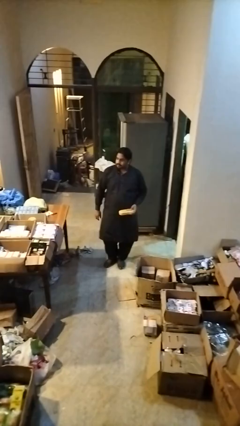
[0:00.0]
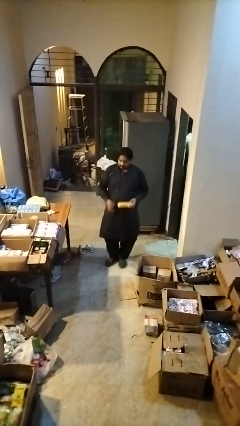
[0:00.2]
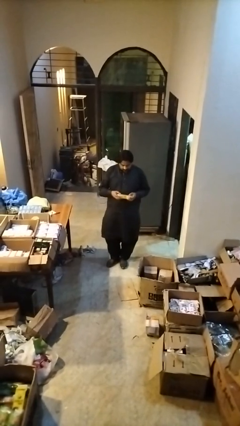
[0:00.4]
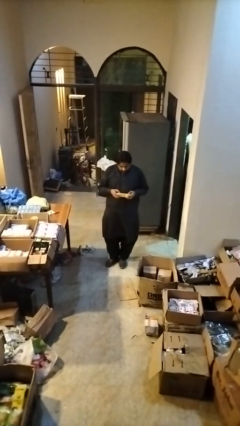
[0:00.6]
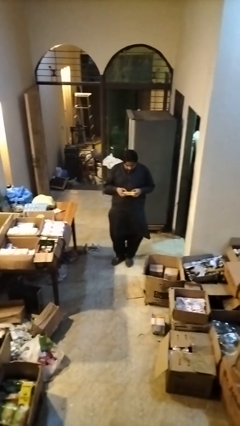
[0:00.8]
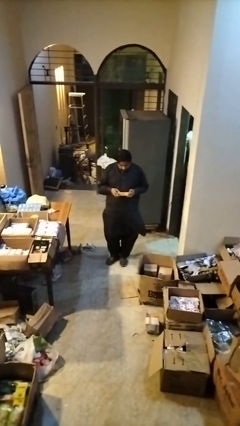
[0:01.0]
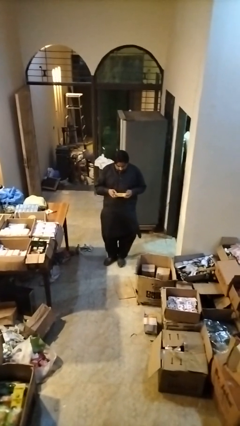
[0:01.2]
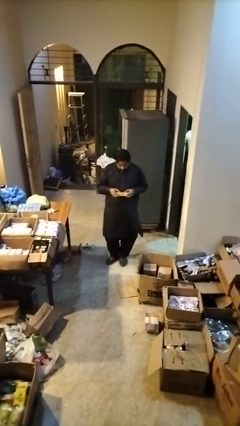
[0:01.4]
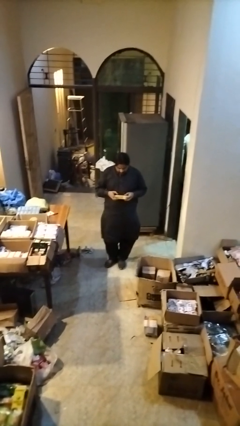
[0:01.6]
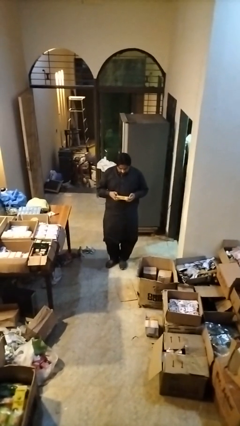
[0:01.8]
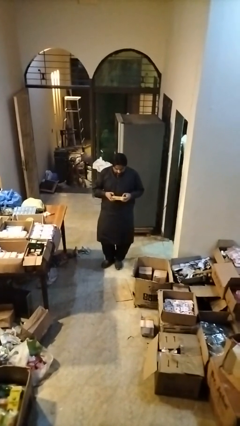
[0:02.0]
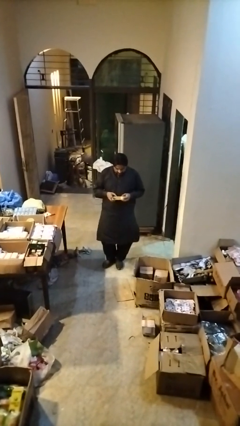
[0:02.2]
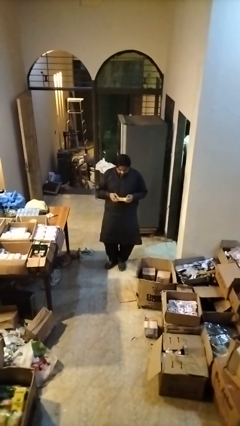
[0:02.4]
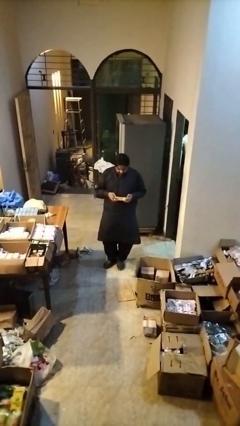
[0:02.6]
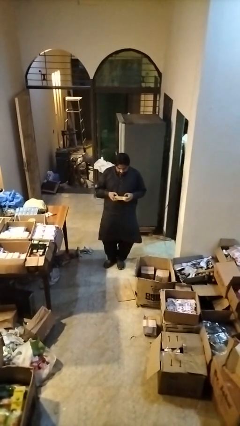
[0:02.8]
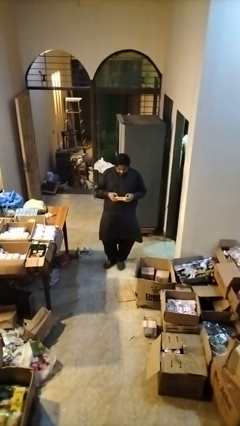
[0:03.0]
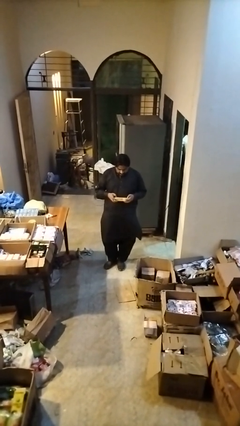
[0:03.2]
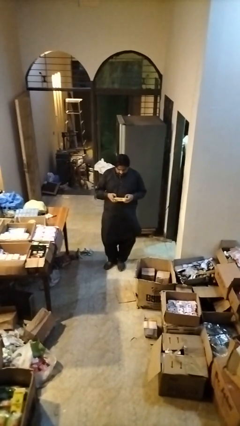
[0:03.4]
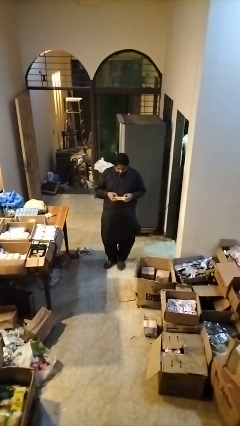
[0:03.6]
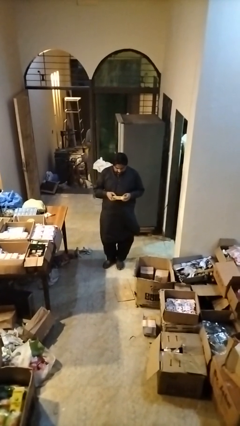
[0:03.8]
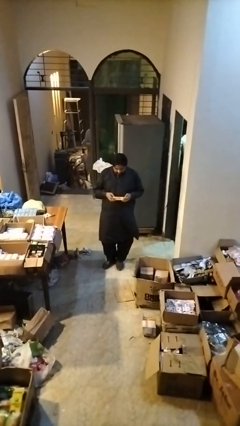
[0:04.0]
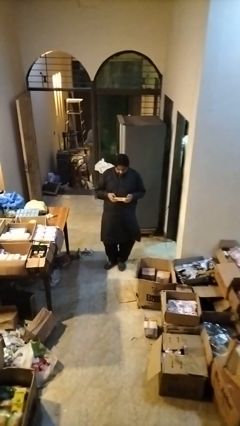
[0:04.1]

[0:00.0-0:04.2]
person interacts with handheld game

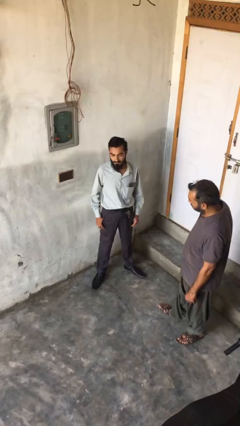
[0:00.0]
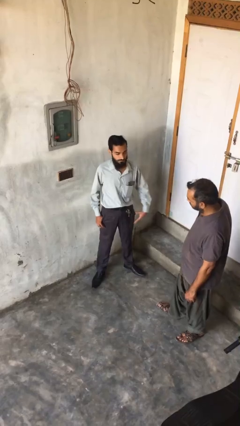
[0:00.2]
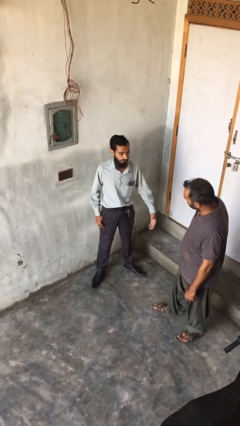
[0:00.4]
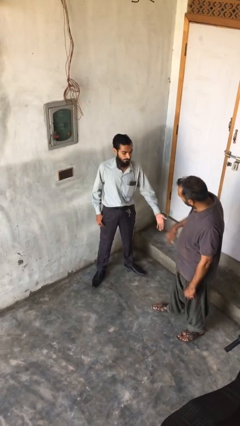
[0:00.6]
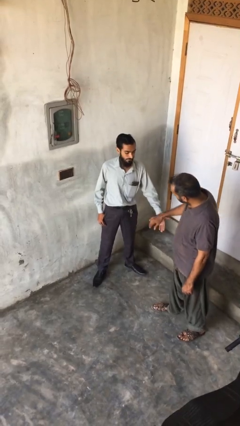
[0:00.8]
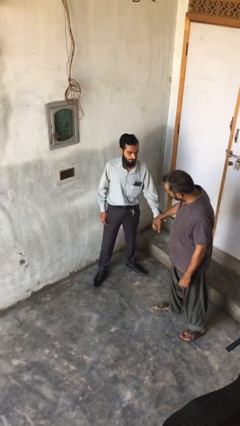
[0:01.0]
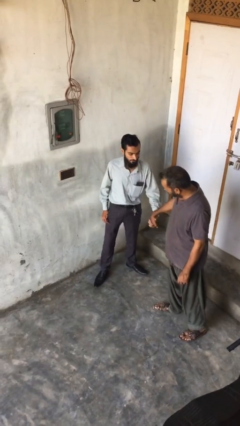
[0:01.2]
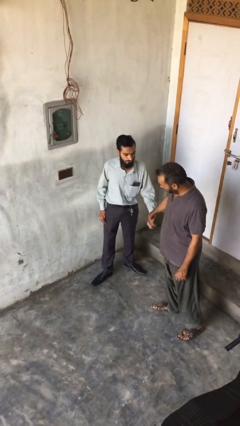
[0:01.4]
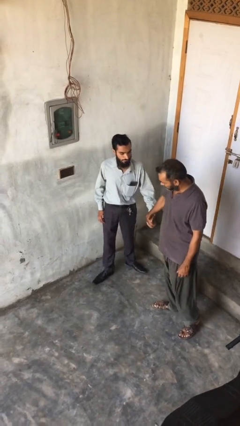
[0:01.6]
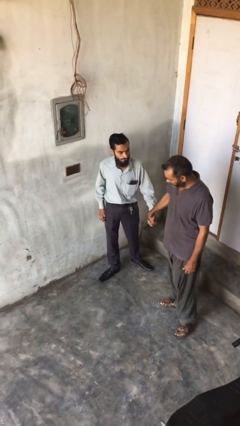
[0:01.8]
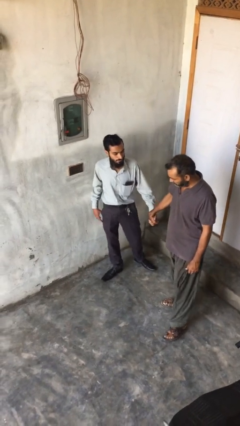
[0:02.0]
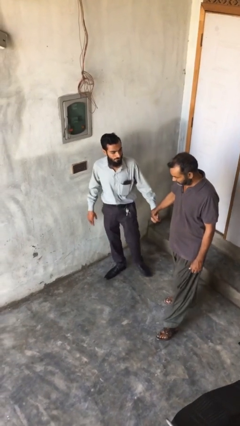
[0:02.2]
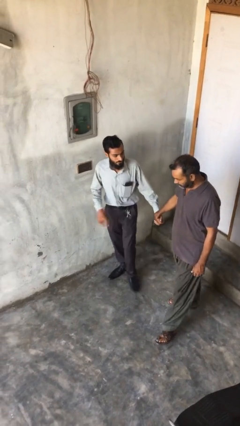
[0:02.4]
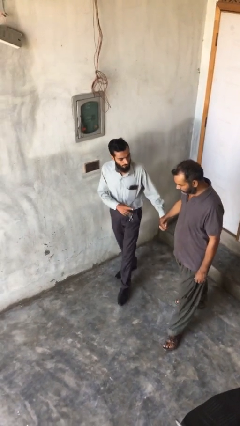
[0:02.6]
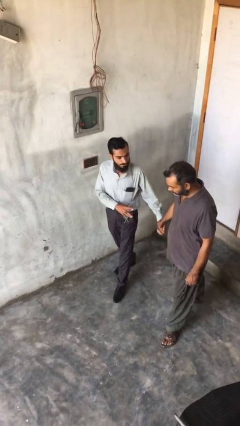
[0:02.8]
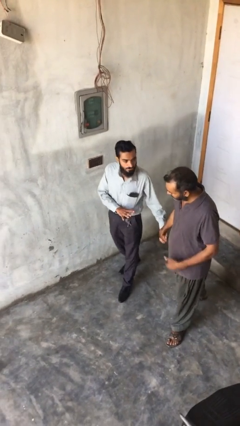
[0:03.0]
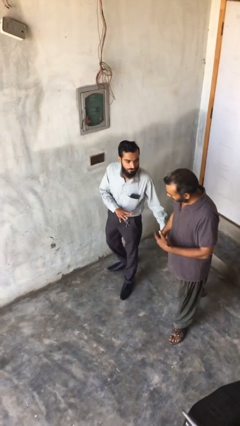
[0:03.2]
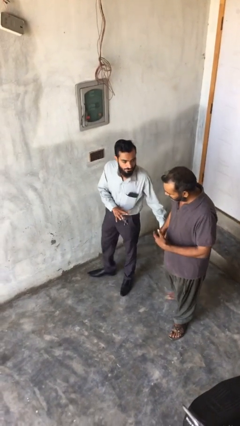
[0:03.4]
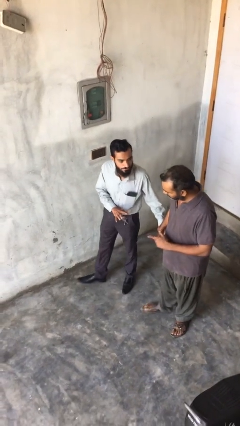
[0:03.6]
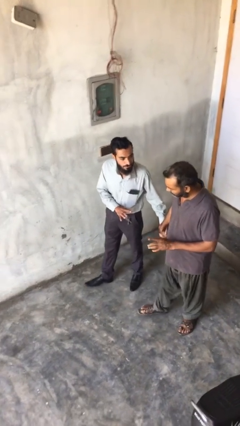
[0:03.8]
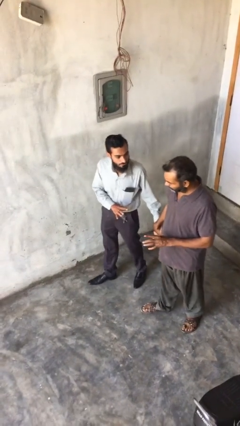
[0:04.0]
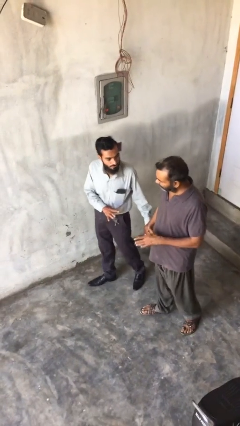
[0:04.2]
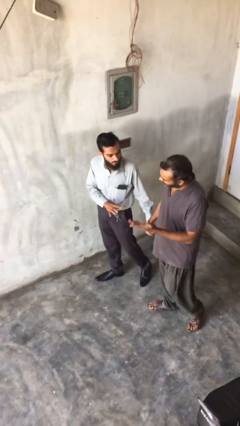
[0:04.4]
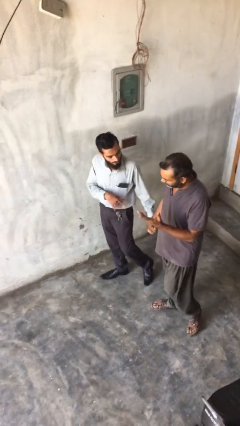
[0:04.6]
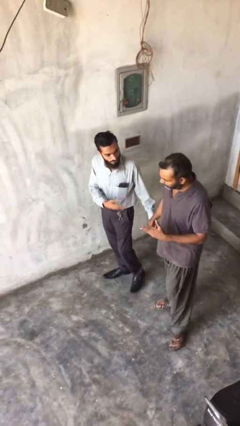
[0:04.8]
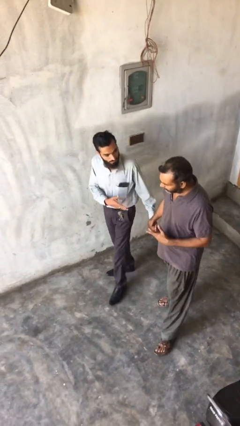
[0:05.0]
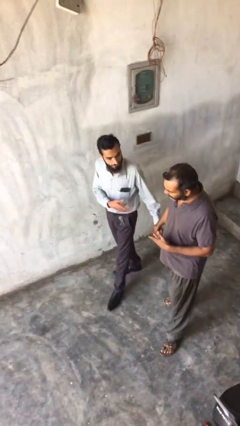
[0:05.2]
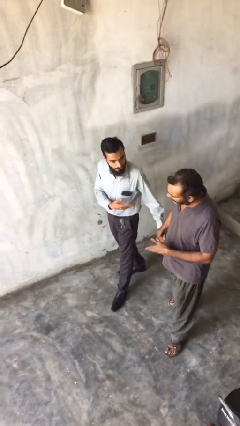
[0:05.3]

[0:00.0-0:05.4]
person holds hand

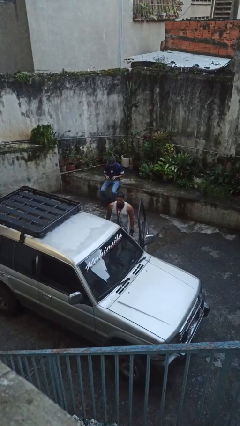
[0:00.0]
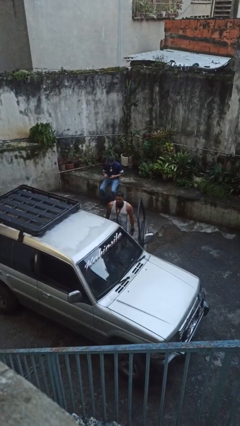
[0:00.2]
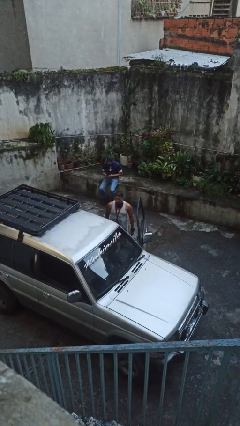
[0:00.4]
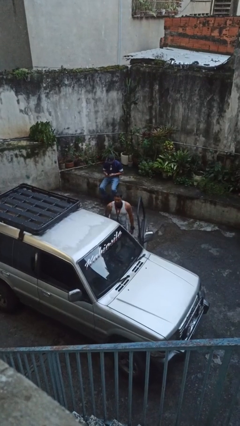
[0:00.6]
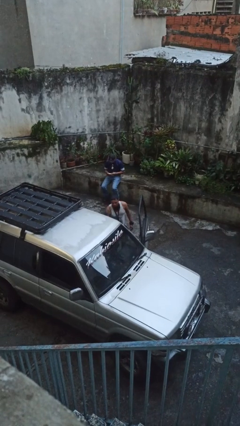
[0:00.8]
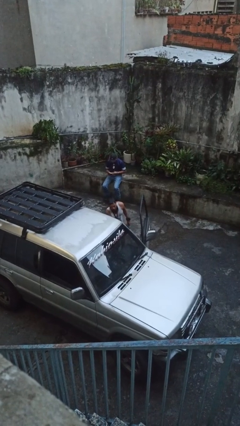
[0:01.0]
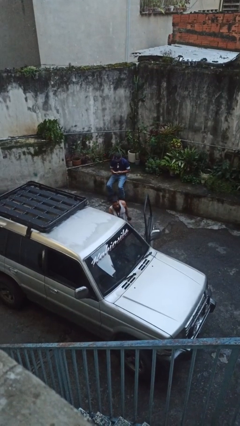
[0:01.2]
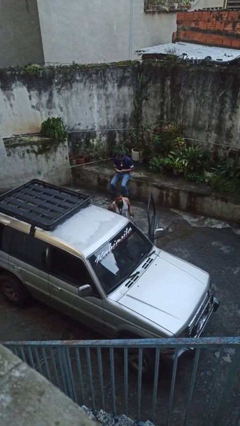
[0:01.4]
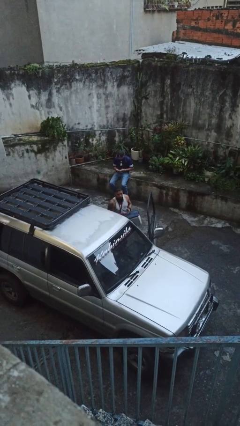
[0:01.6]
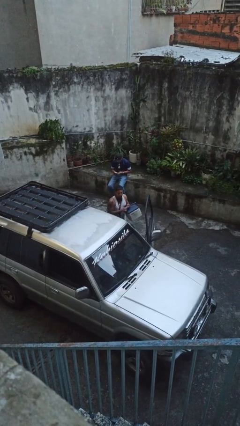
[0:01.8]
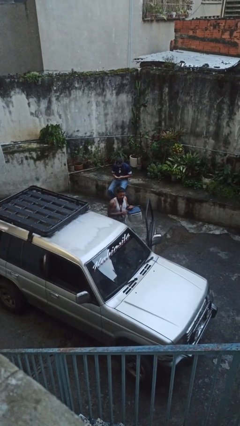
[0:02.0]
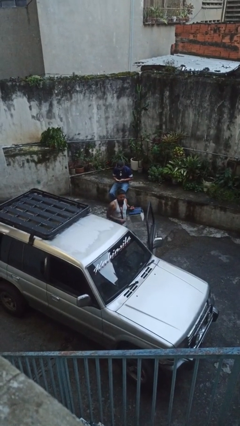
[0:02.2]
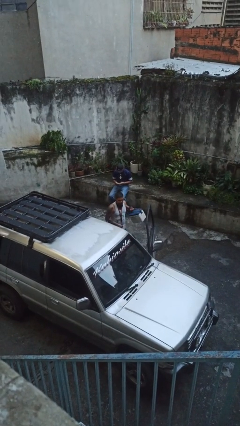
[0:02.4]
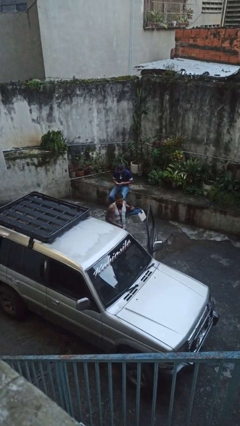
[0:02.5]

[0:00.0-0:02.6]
person unloads car

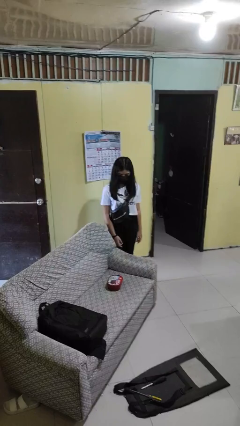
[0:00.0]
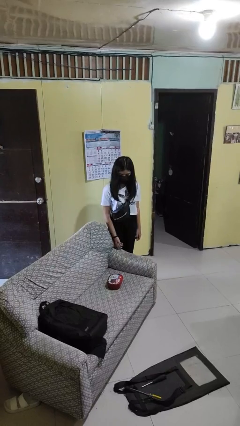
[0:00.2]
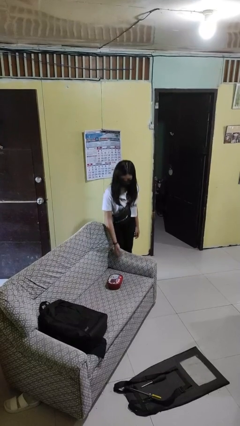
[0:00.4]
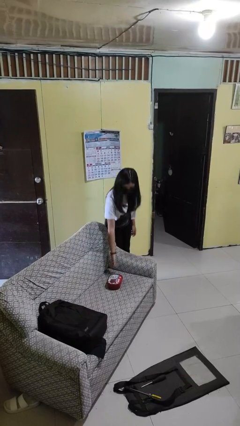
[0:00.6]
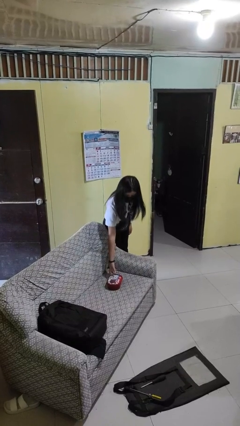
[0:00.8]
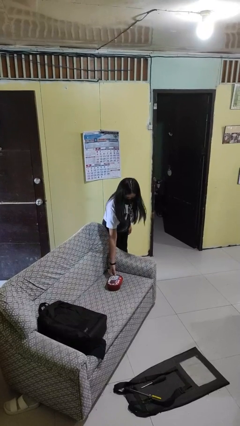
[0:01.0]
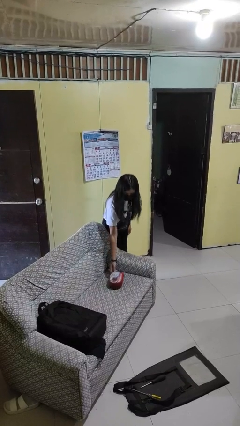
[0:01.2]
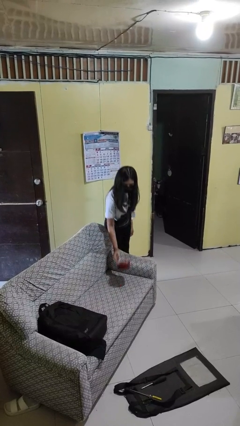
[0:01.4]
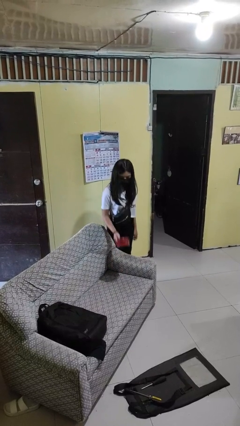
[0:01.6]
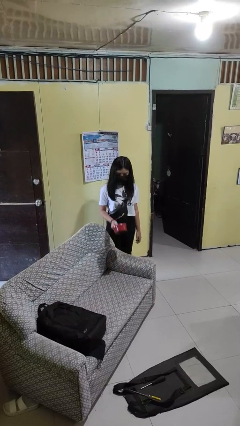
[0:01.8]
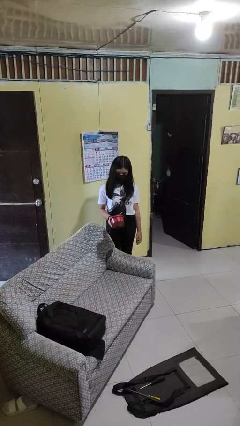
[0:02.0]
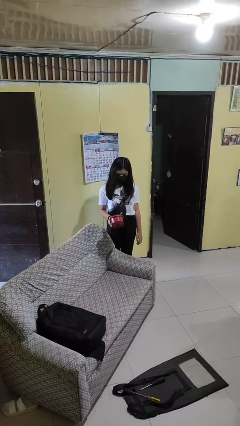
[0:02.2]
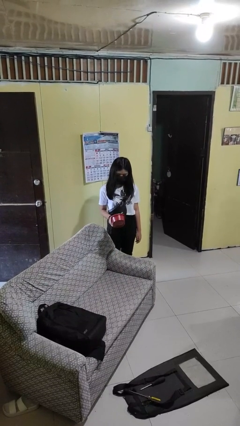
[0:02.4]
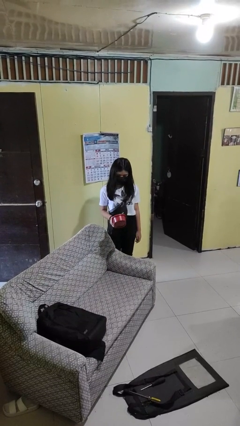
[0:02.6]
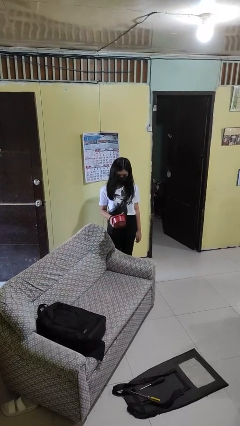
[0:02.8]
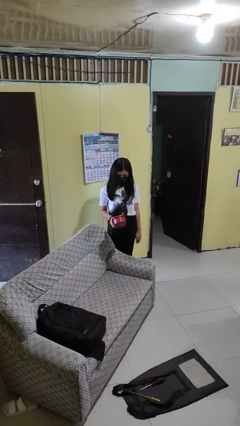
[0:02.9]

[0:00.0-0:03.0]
person picks up object from couch

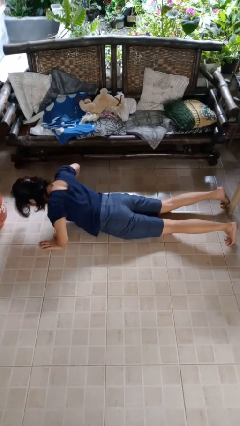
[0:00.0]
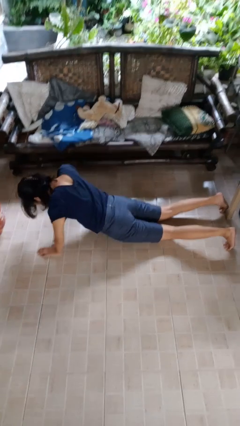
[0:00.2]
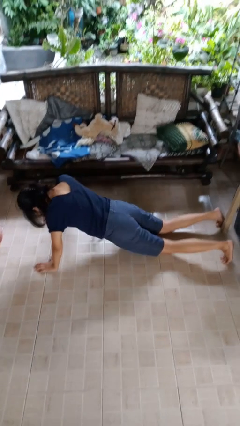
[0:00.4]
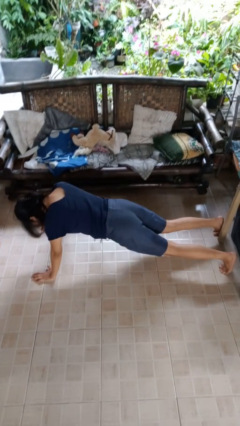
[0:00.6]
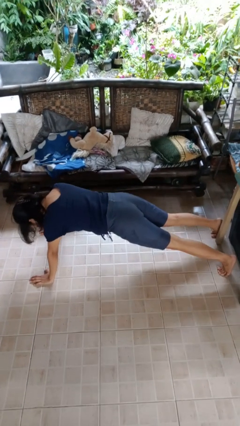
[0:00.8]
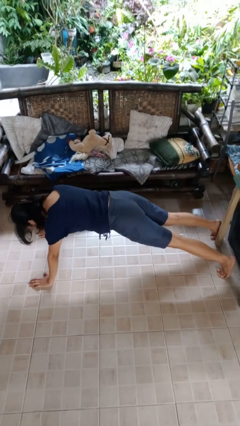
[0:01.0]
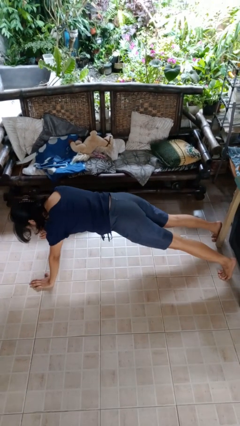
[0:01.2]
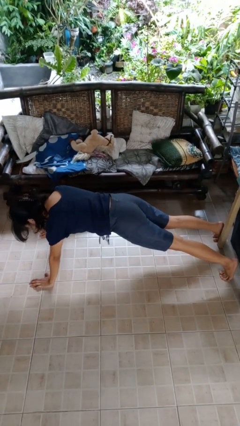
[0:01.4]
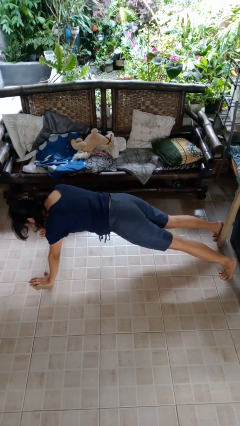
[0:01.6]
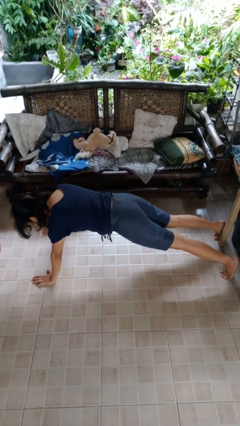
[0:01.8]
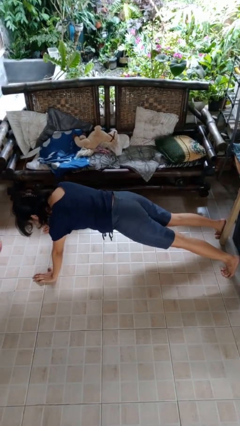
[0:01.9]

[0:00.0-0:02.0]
person exercises with pushup

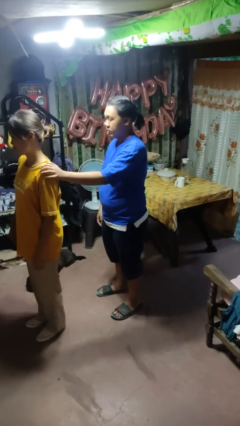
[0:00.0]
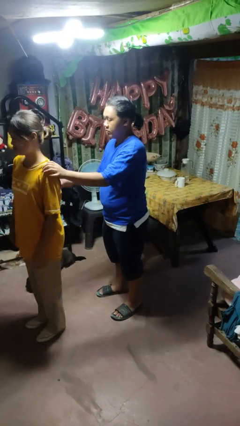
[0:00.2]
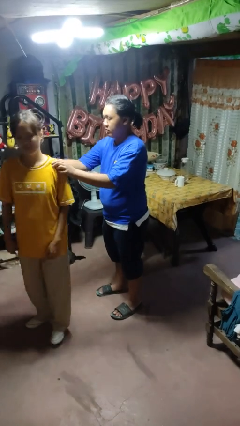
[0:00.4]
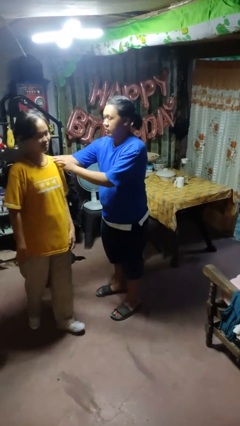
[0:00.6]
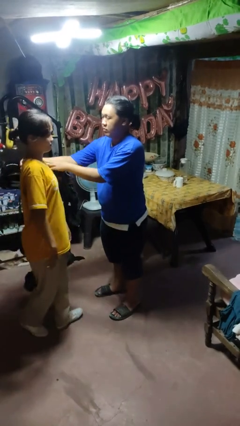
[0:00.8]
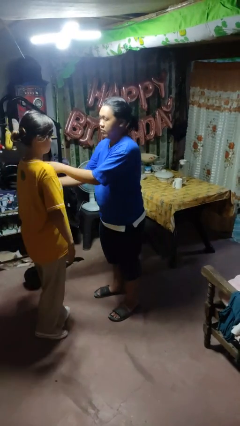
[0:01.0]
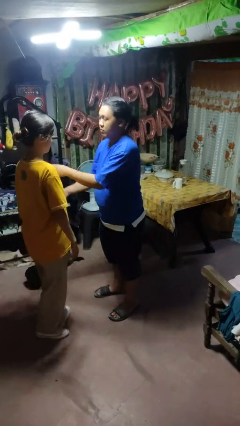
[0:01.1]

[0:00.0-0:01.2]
person spins person around
